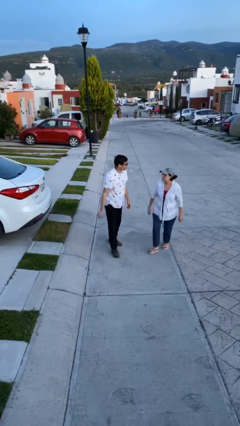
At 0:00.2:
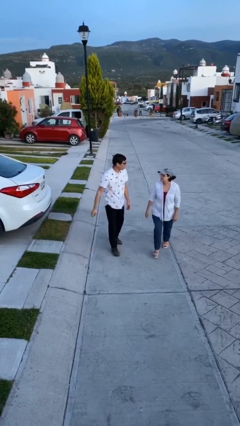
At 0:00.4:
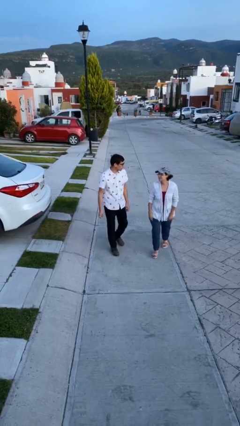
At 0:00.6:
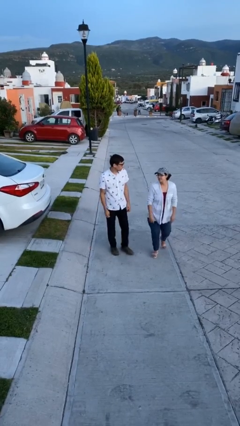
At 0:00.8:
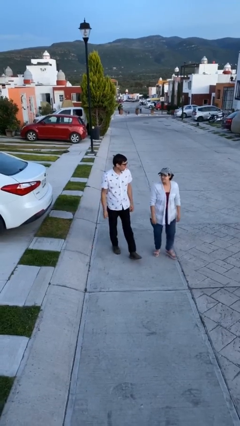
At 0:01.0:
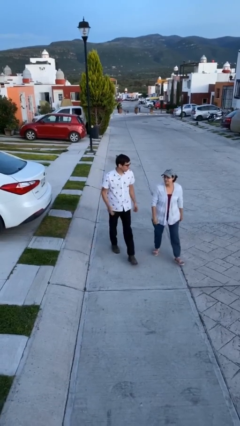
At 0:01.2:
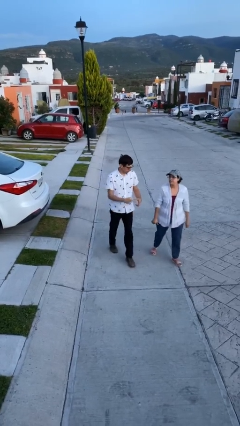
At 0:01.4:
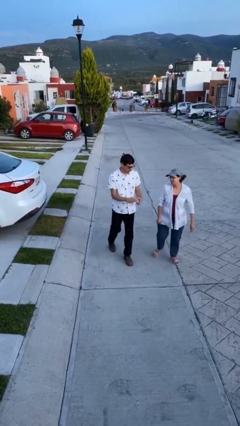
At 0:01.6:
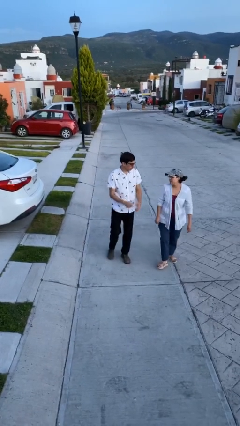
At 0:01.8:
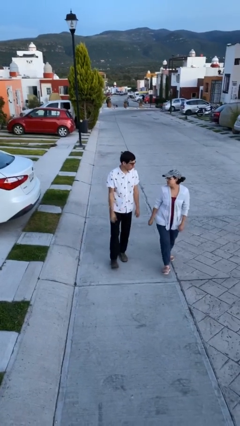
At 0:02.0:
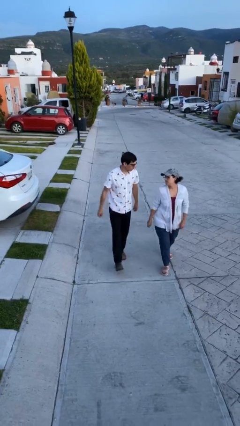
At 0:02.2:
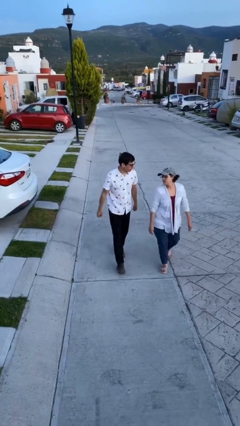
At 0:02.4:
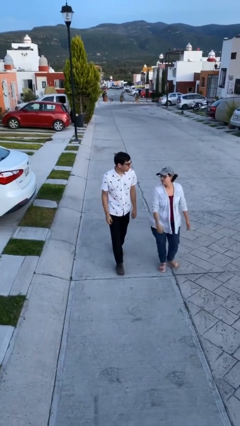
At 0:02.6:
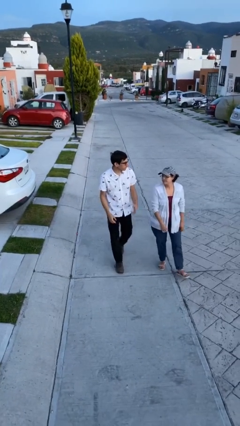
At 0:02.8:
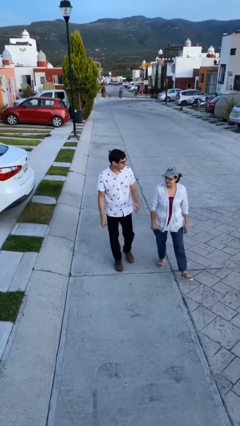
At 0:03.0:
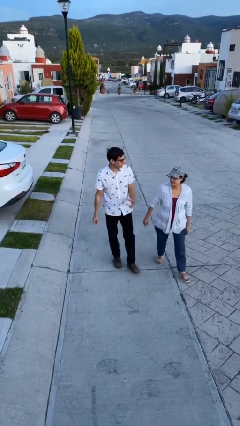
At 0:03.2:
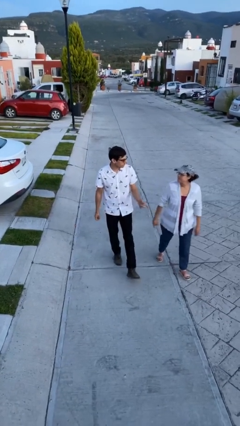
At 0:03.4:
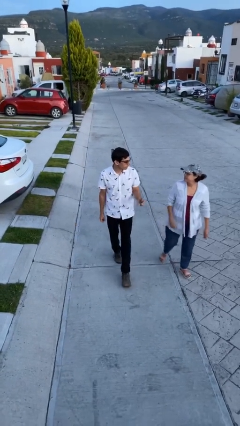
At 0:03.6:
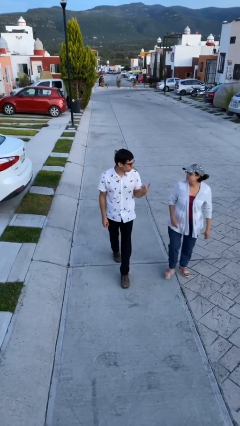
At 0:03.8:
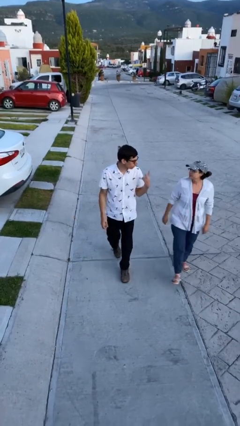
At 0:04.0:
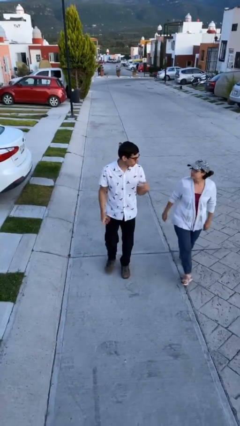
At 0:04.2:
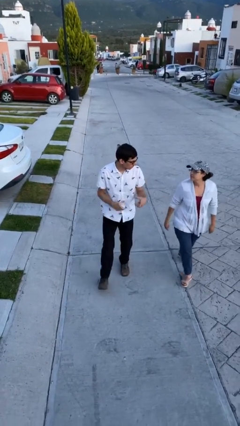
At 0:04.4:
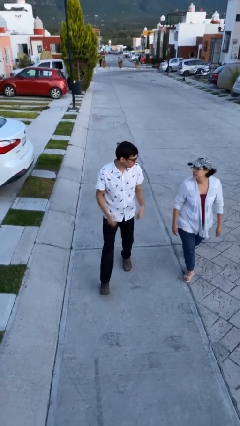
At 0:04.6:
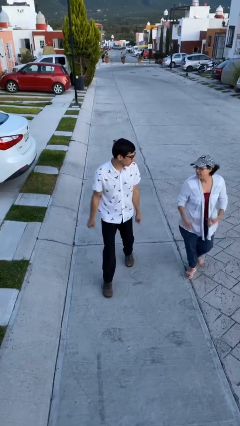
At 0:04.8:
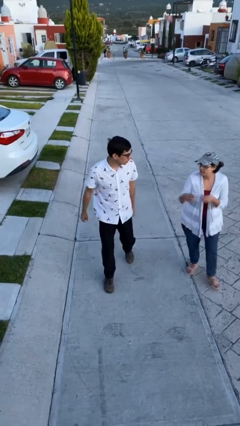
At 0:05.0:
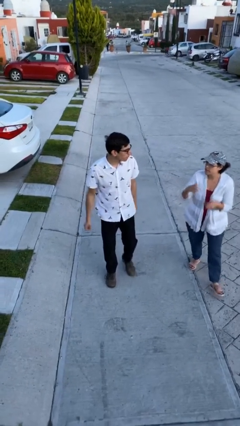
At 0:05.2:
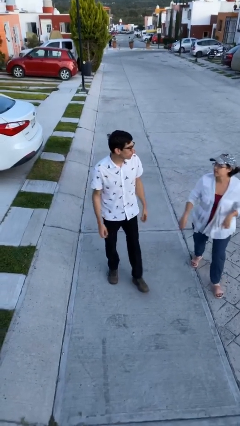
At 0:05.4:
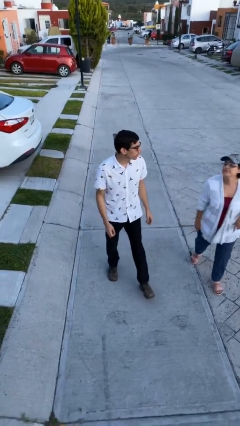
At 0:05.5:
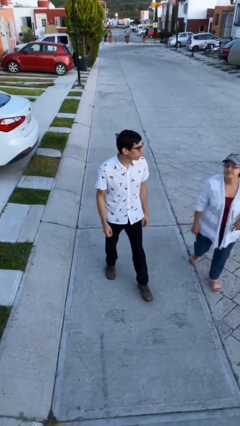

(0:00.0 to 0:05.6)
person talks to person

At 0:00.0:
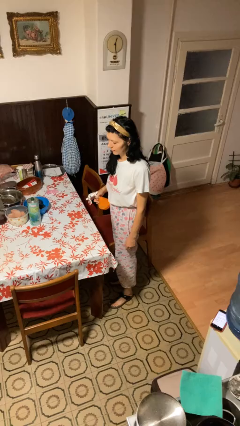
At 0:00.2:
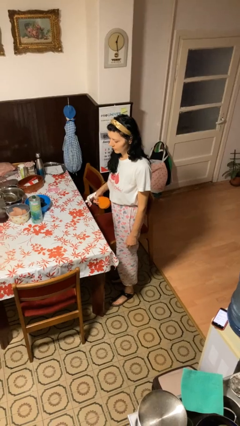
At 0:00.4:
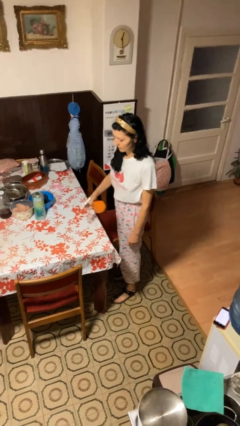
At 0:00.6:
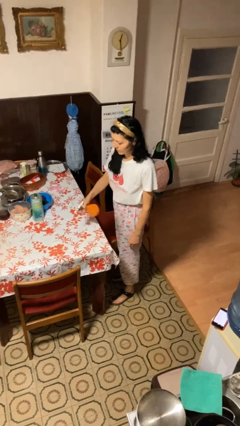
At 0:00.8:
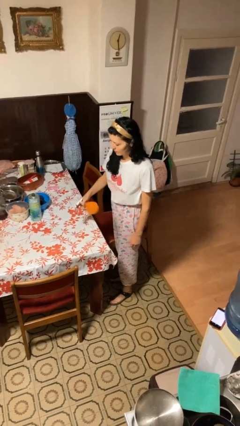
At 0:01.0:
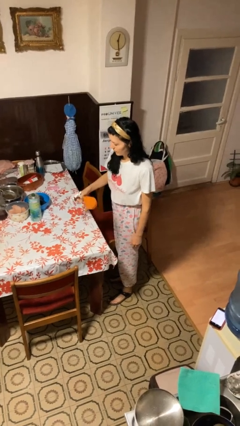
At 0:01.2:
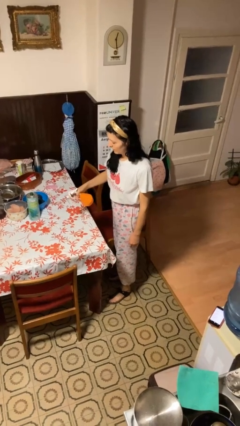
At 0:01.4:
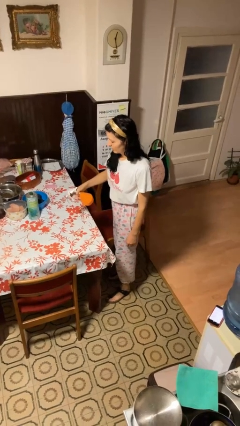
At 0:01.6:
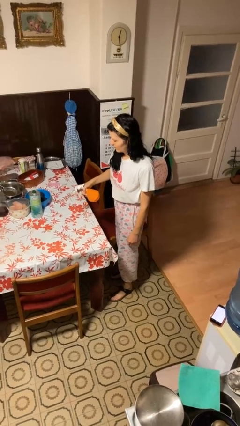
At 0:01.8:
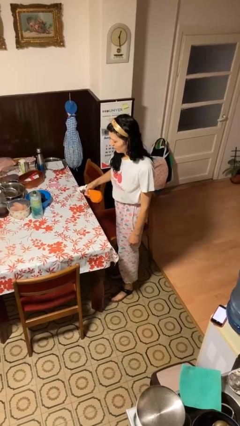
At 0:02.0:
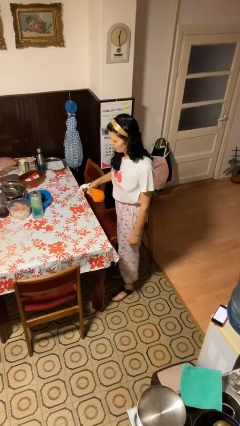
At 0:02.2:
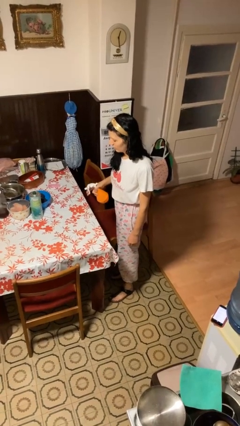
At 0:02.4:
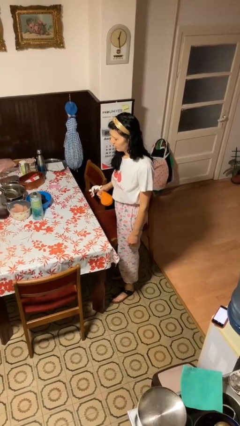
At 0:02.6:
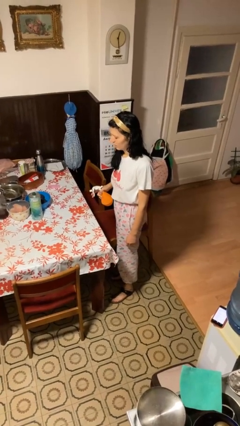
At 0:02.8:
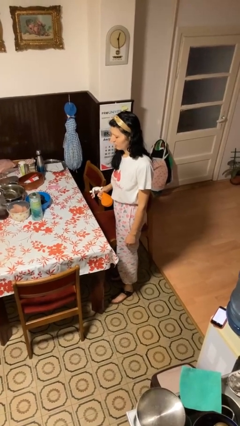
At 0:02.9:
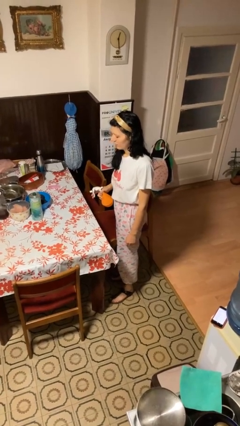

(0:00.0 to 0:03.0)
person sprays from bottle

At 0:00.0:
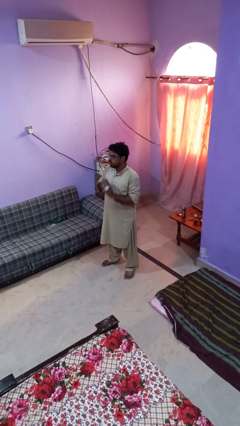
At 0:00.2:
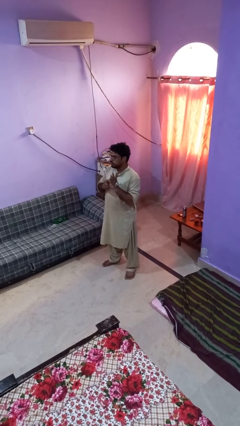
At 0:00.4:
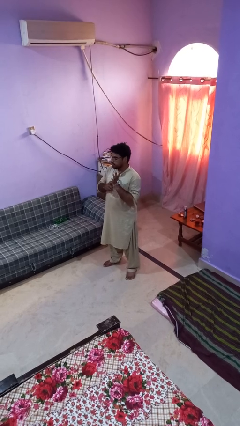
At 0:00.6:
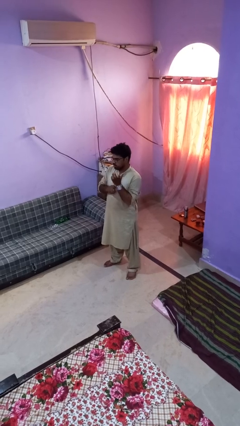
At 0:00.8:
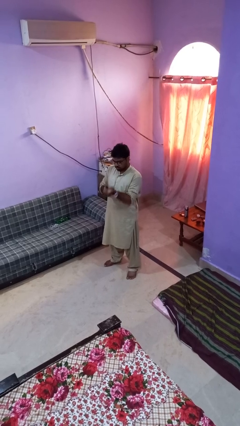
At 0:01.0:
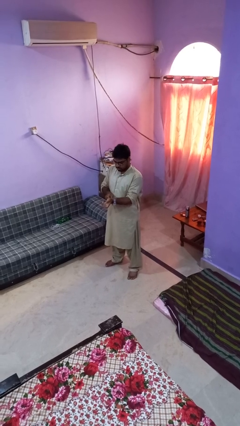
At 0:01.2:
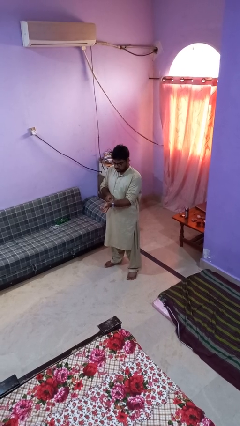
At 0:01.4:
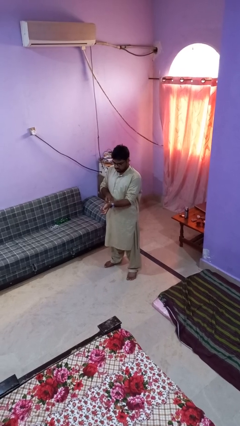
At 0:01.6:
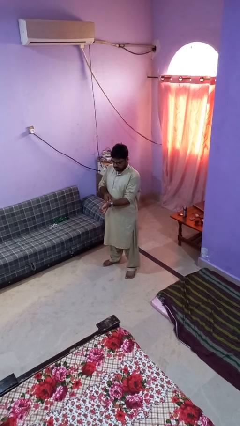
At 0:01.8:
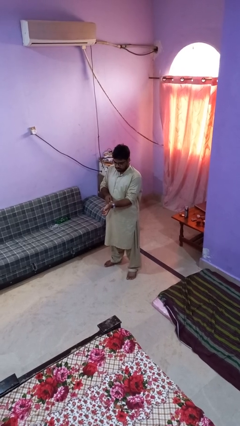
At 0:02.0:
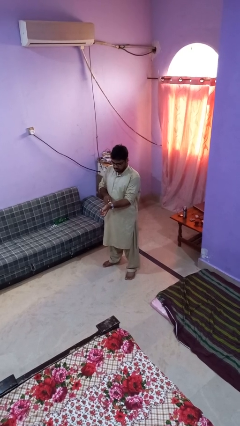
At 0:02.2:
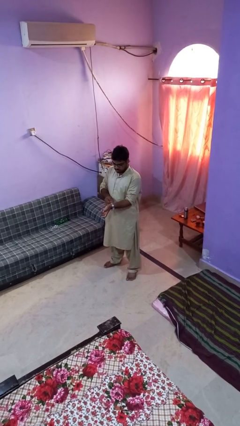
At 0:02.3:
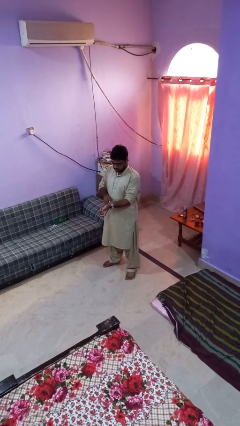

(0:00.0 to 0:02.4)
person puts on wristwatch

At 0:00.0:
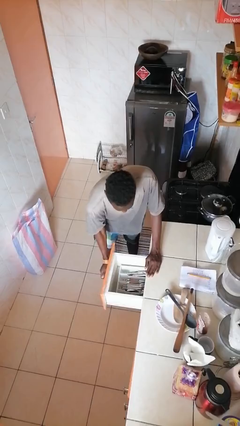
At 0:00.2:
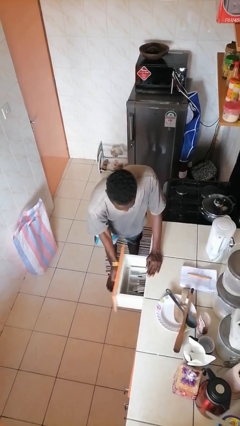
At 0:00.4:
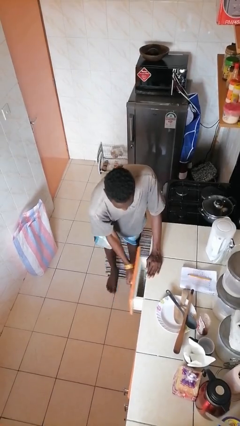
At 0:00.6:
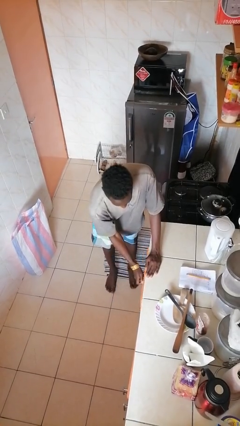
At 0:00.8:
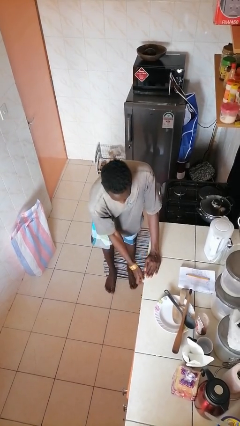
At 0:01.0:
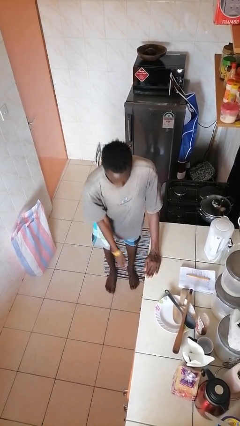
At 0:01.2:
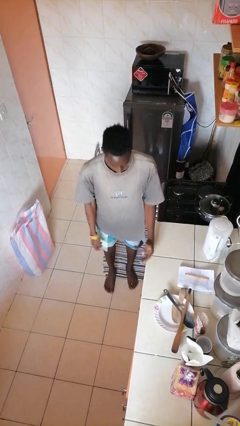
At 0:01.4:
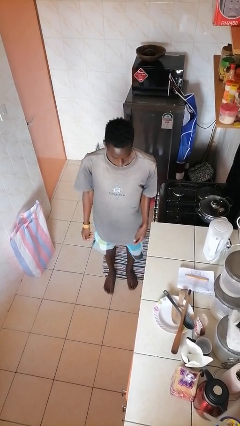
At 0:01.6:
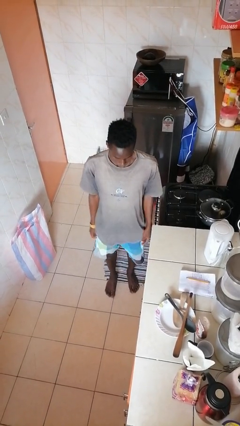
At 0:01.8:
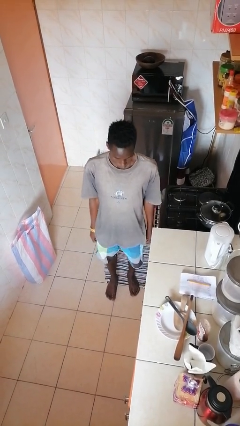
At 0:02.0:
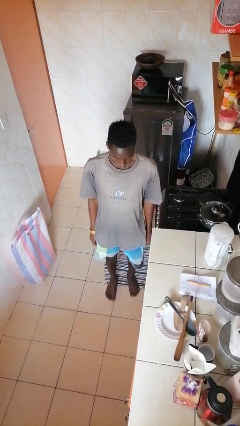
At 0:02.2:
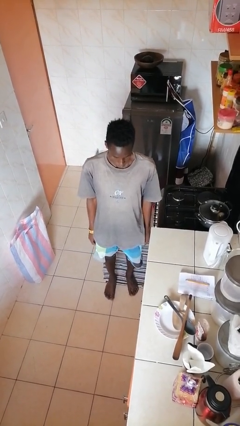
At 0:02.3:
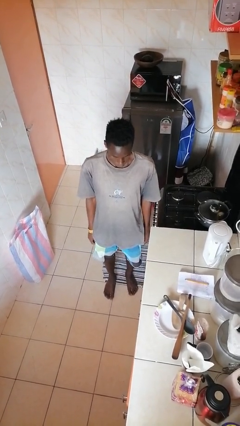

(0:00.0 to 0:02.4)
person closes kitchen drawer

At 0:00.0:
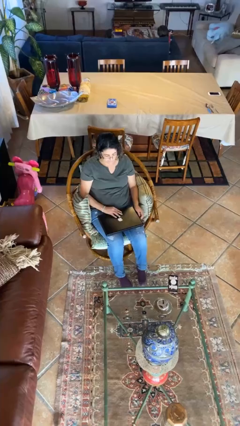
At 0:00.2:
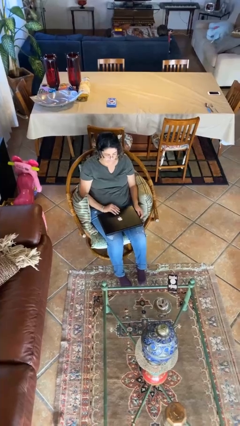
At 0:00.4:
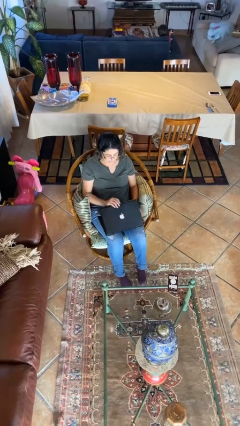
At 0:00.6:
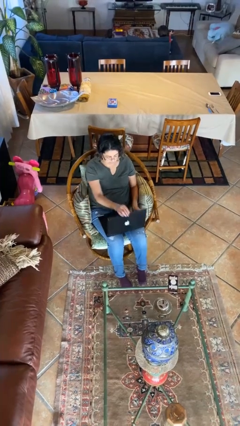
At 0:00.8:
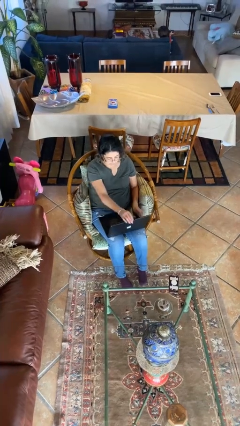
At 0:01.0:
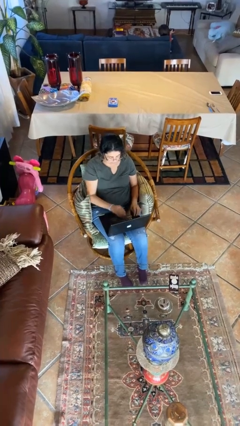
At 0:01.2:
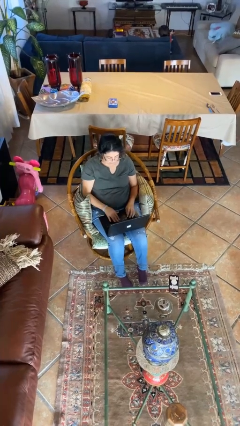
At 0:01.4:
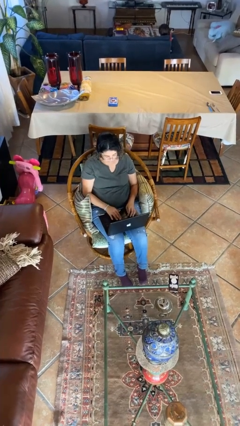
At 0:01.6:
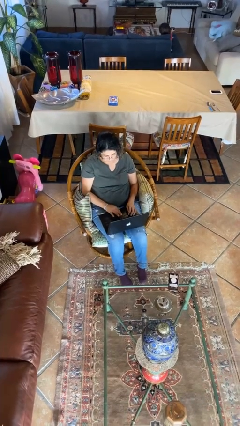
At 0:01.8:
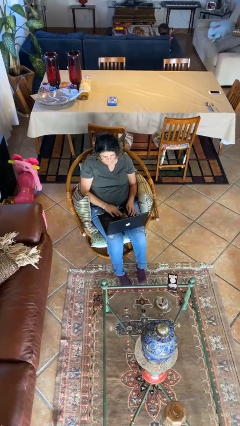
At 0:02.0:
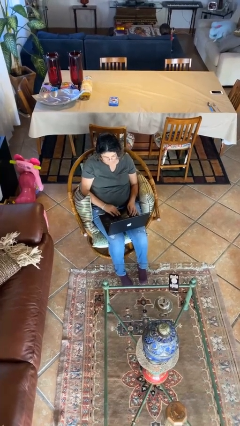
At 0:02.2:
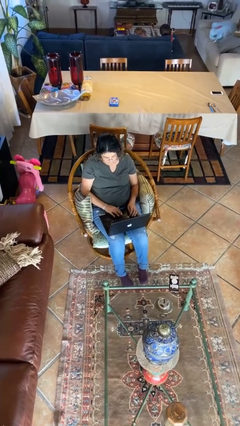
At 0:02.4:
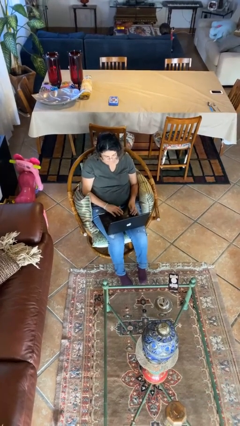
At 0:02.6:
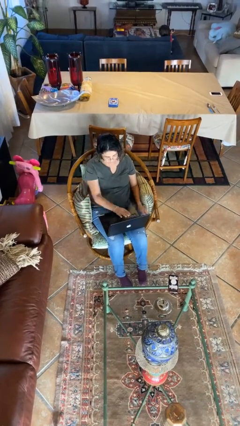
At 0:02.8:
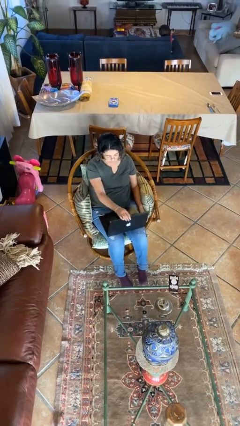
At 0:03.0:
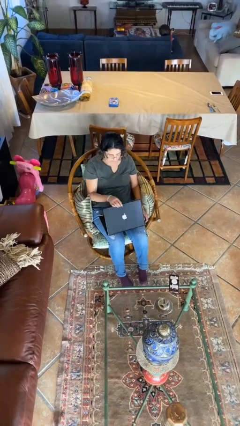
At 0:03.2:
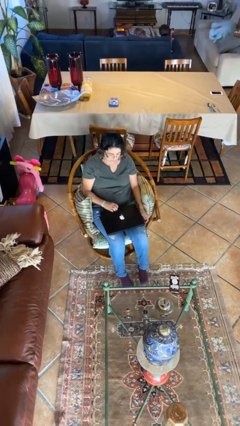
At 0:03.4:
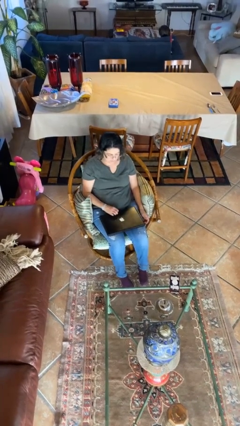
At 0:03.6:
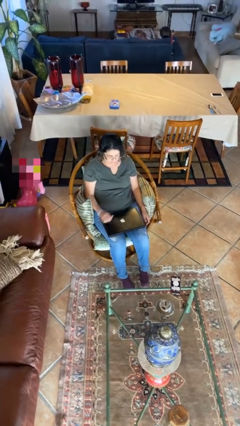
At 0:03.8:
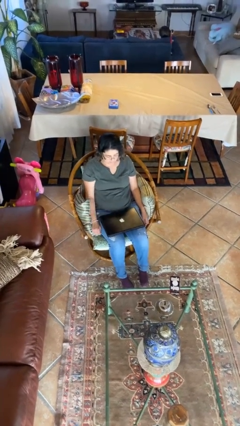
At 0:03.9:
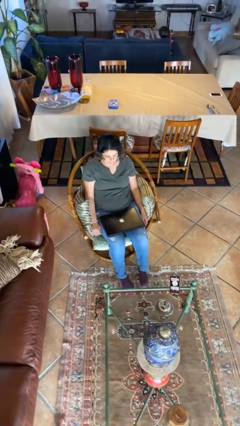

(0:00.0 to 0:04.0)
person interacts with laptop

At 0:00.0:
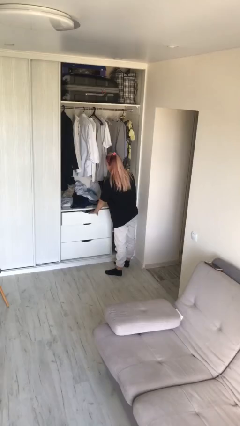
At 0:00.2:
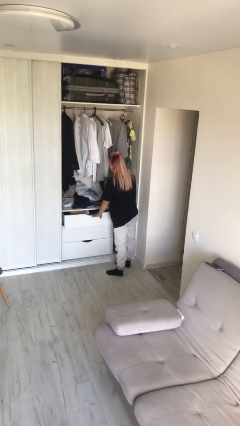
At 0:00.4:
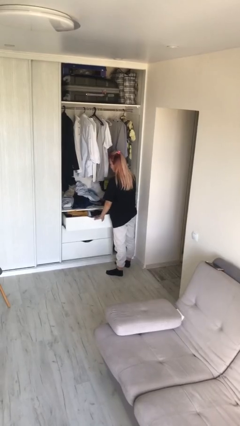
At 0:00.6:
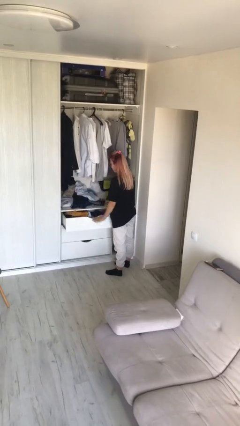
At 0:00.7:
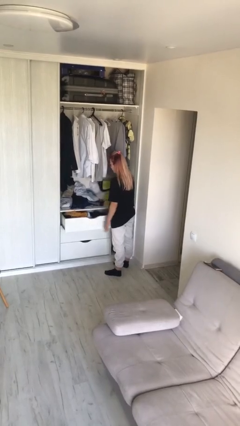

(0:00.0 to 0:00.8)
person opens dresser drawer
